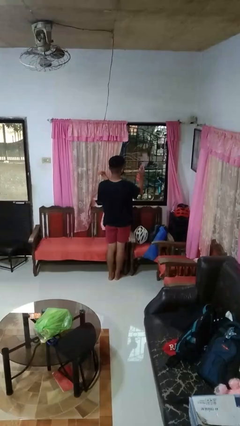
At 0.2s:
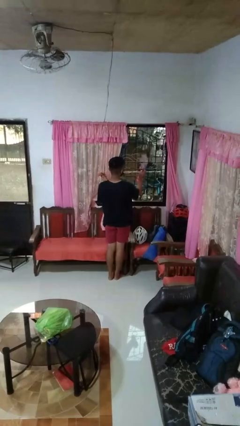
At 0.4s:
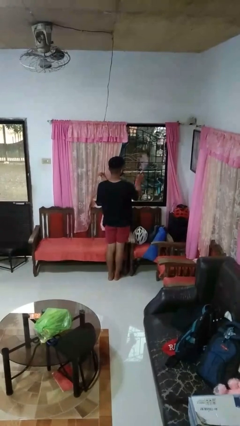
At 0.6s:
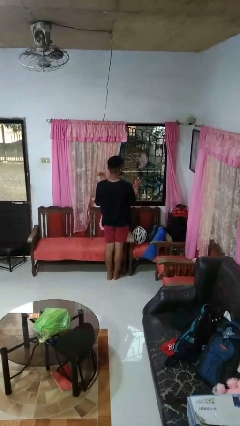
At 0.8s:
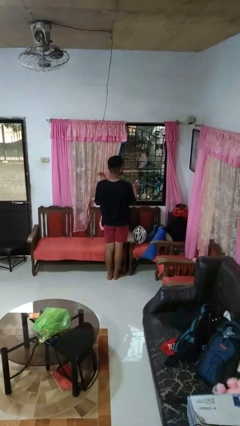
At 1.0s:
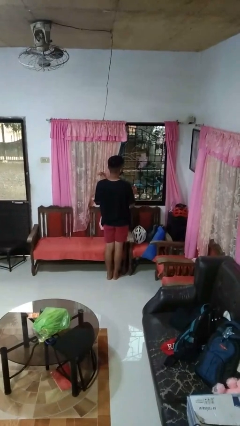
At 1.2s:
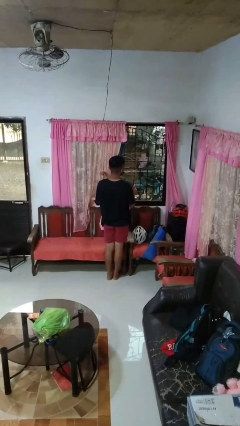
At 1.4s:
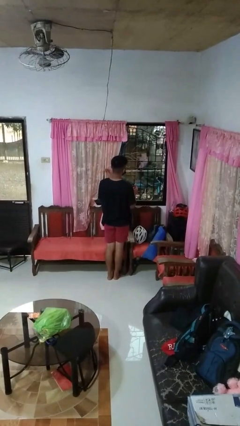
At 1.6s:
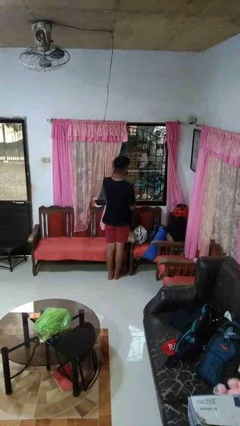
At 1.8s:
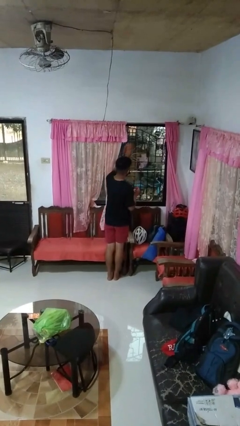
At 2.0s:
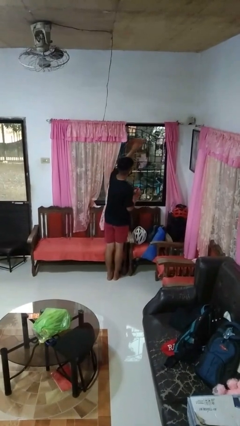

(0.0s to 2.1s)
person sprays from bottle

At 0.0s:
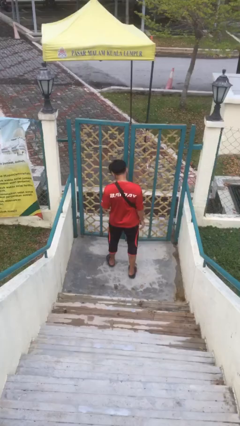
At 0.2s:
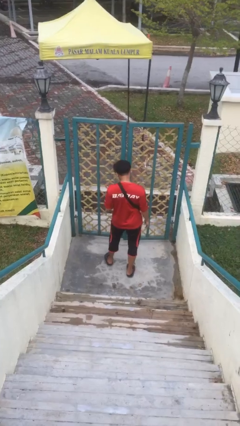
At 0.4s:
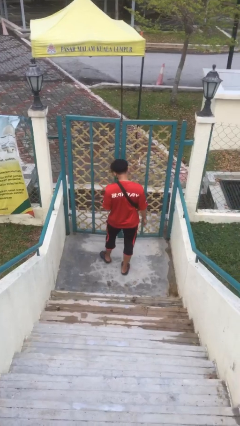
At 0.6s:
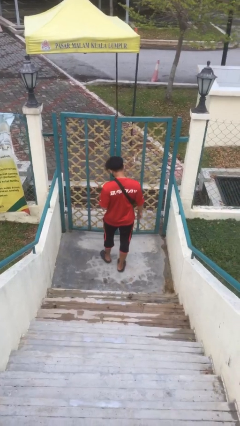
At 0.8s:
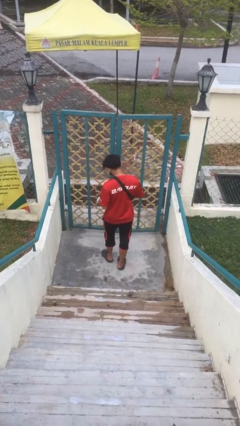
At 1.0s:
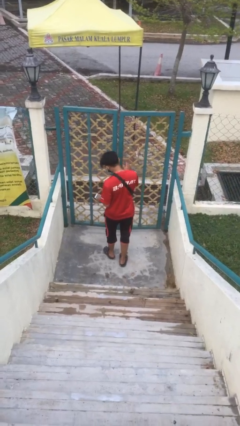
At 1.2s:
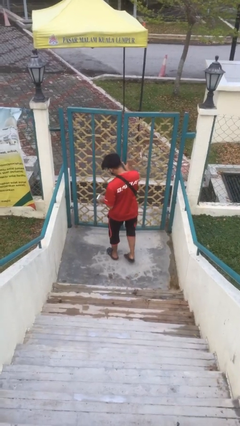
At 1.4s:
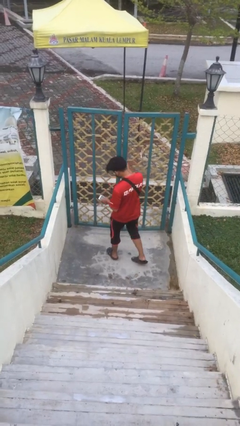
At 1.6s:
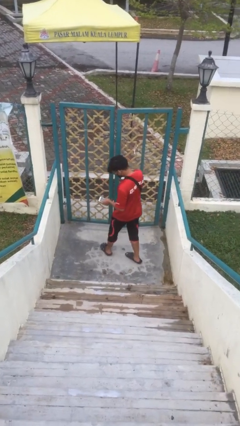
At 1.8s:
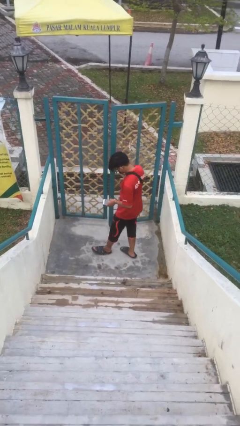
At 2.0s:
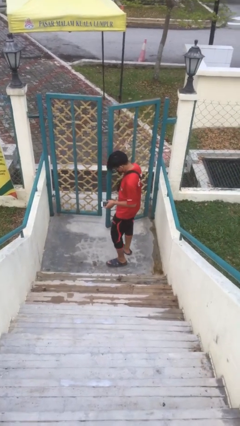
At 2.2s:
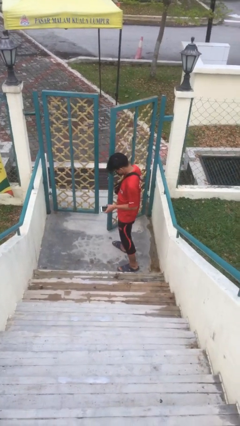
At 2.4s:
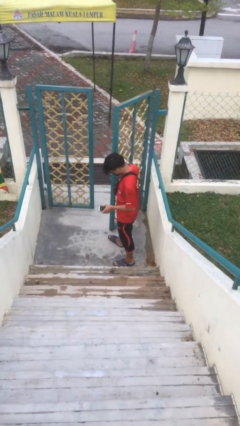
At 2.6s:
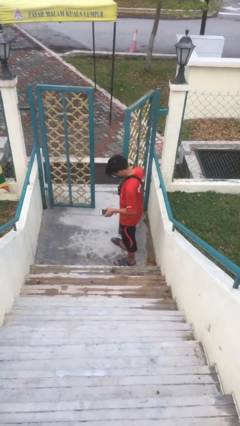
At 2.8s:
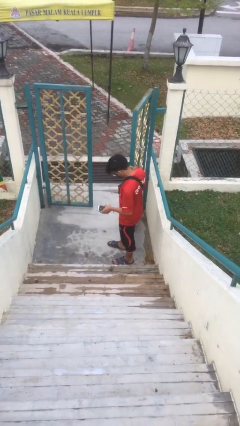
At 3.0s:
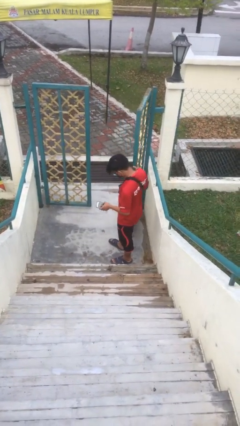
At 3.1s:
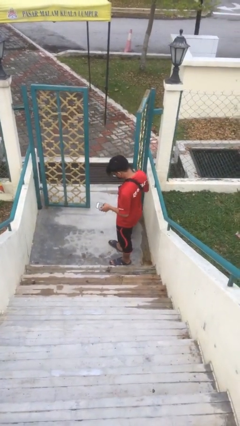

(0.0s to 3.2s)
person opens facility door

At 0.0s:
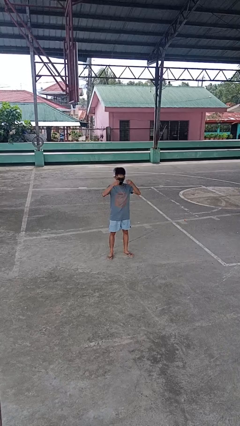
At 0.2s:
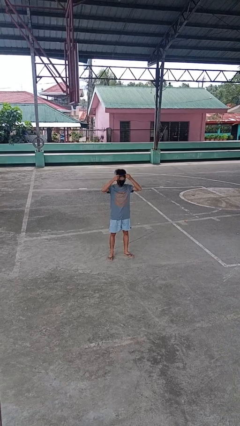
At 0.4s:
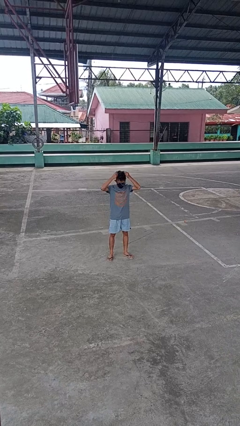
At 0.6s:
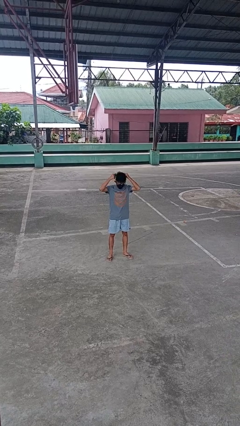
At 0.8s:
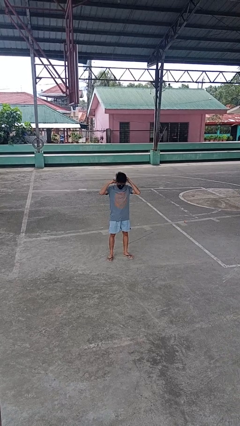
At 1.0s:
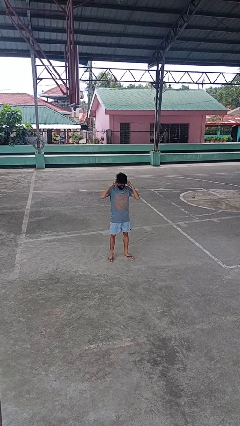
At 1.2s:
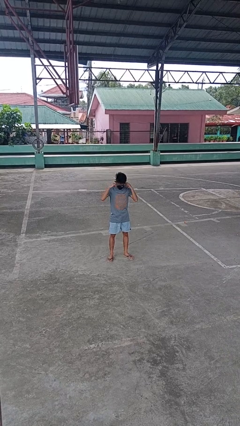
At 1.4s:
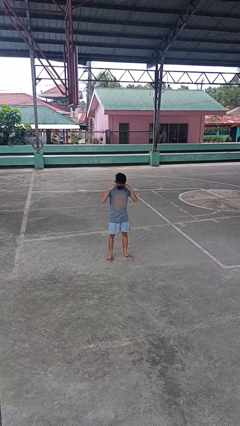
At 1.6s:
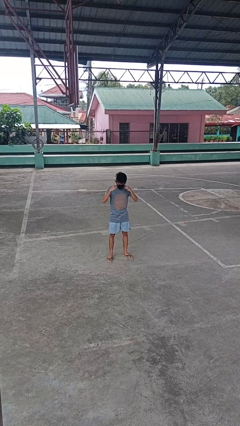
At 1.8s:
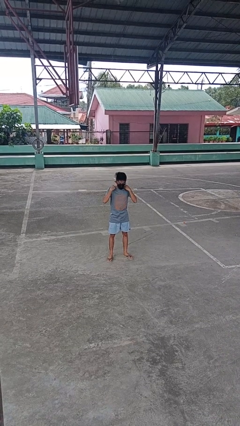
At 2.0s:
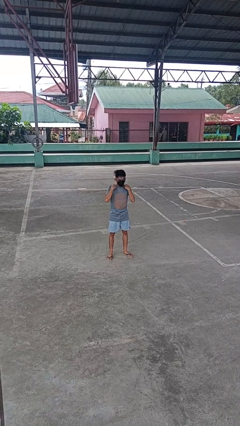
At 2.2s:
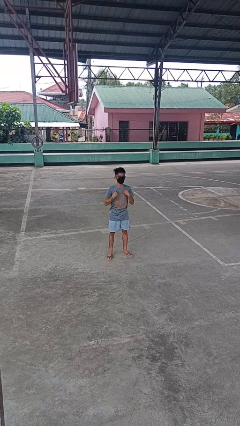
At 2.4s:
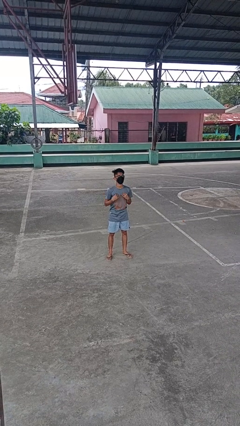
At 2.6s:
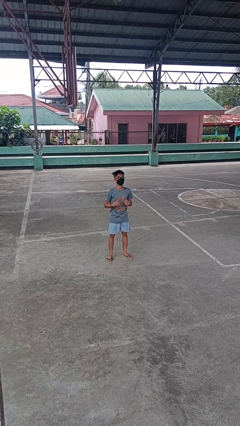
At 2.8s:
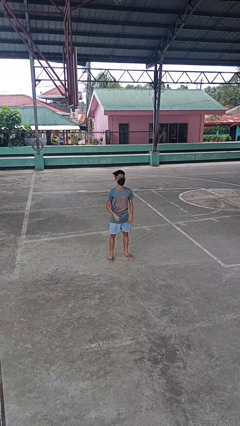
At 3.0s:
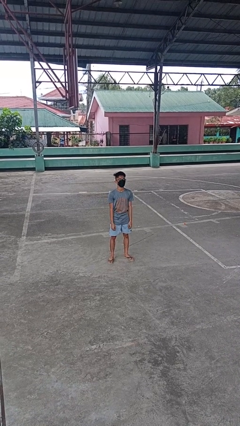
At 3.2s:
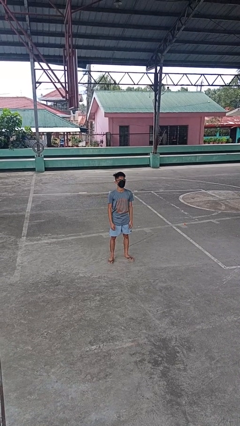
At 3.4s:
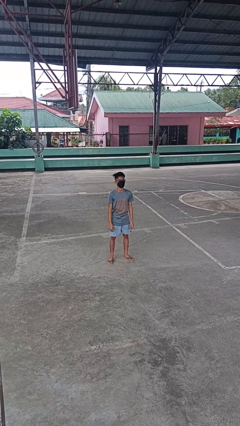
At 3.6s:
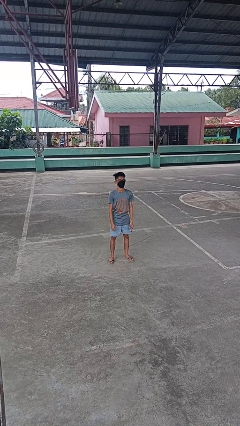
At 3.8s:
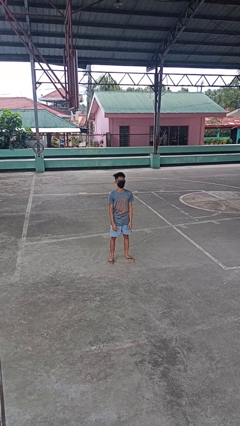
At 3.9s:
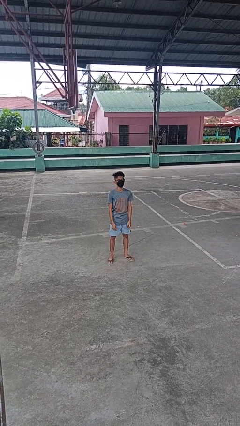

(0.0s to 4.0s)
person puts on necklace

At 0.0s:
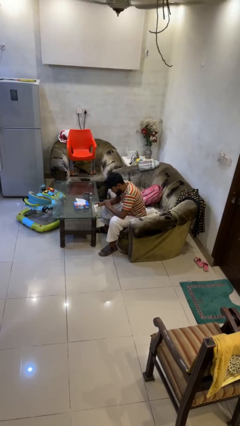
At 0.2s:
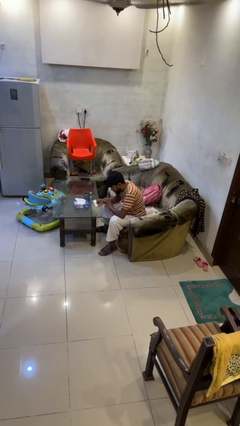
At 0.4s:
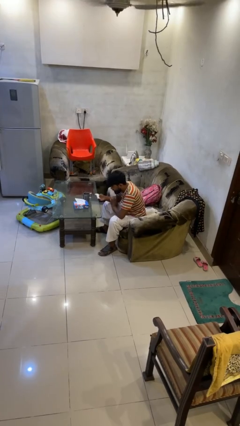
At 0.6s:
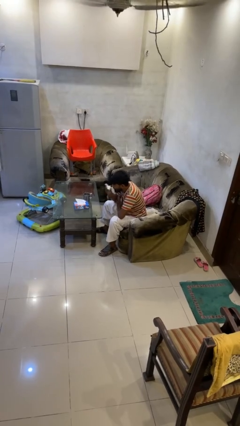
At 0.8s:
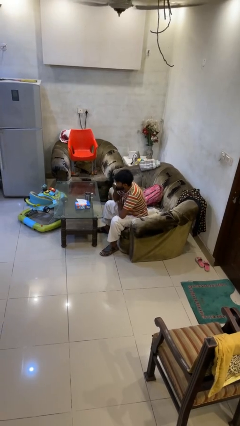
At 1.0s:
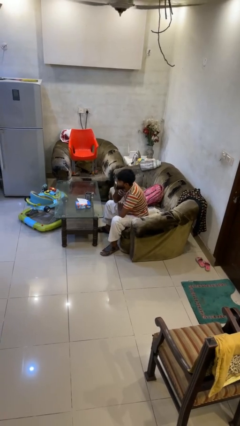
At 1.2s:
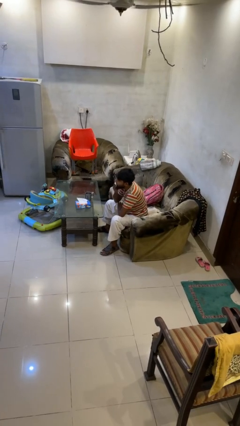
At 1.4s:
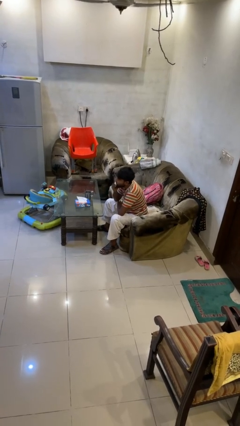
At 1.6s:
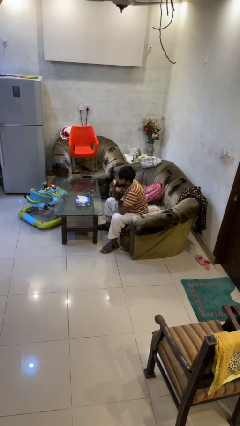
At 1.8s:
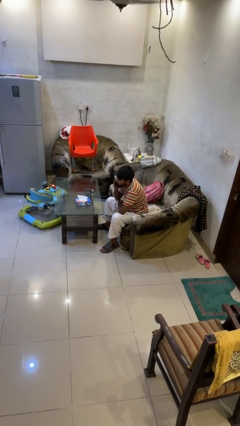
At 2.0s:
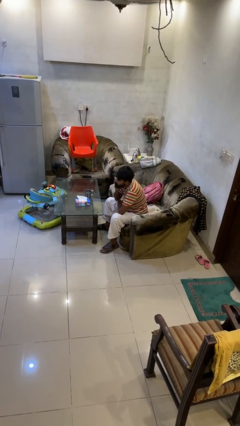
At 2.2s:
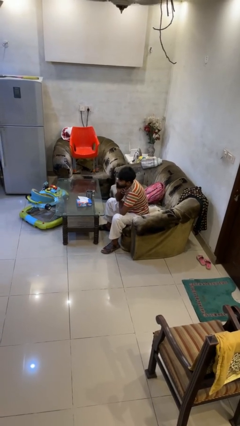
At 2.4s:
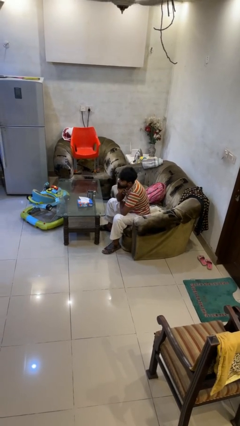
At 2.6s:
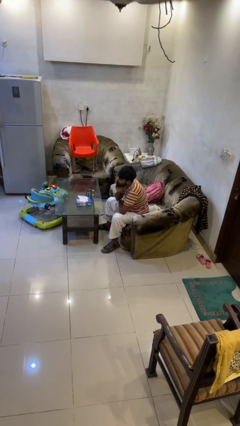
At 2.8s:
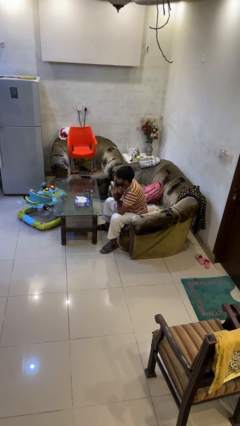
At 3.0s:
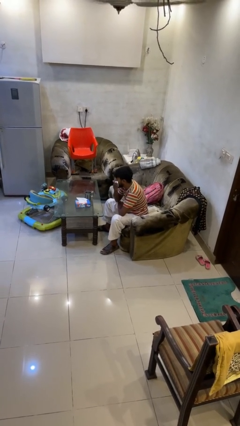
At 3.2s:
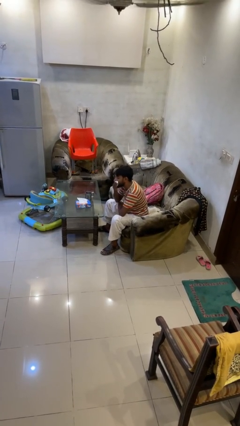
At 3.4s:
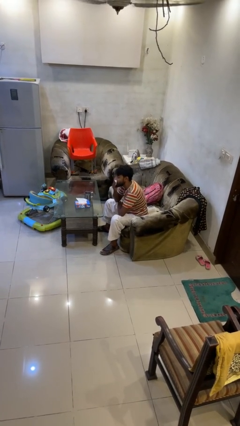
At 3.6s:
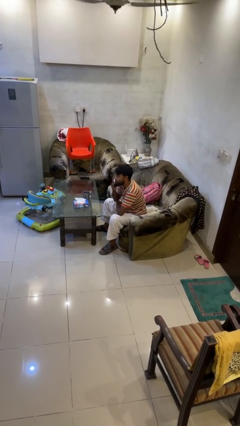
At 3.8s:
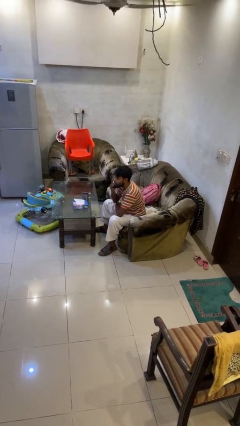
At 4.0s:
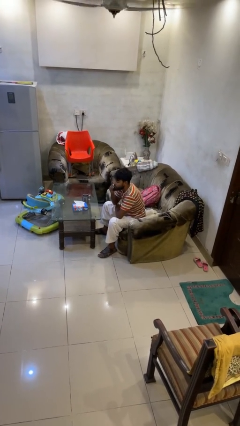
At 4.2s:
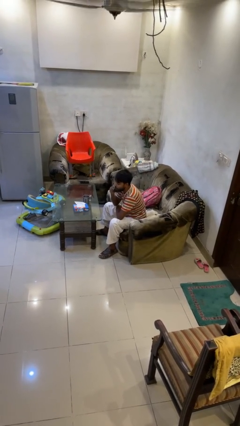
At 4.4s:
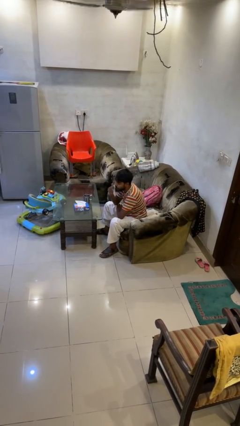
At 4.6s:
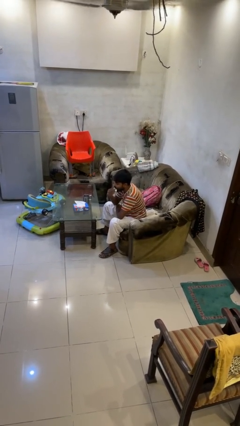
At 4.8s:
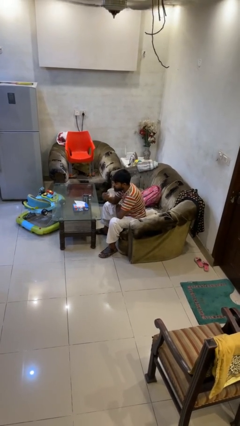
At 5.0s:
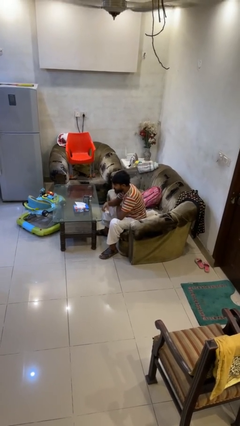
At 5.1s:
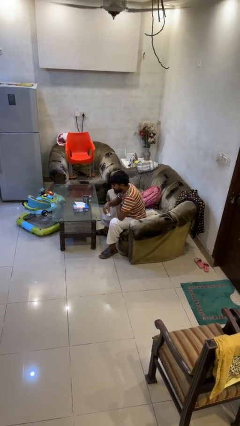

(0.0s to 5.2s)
person wipes mouth with napkin

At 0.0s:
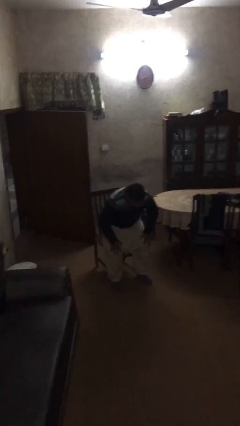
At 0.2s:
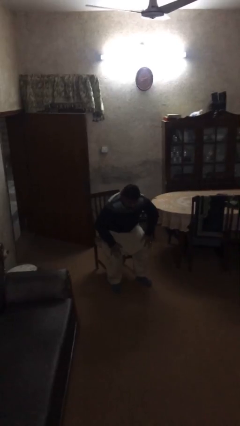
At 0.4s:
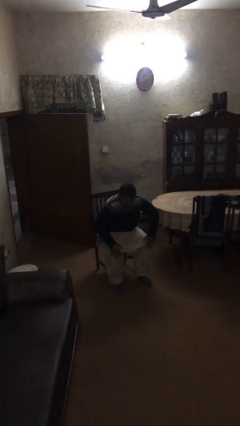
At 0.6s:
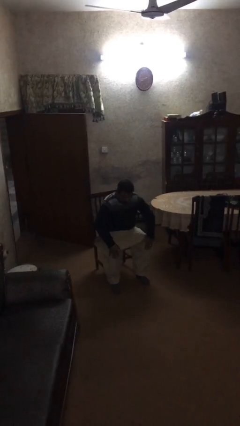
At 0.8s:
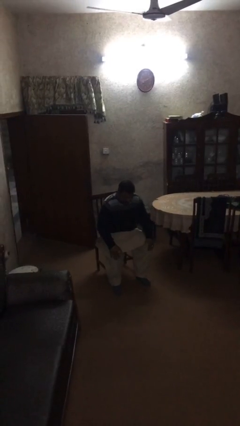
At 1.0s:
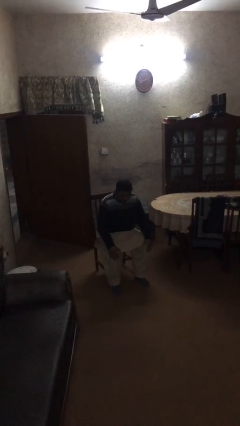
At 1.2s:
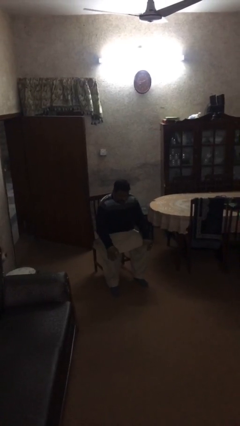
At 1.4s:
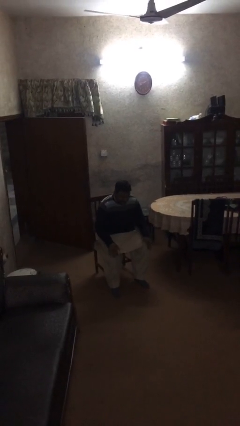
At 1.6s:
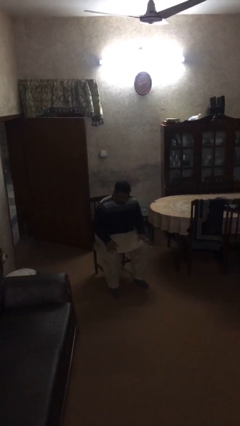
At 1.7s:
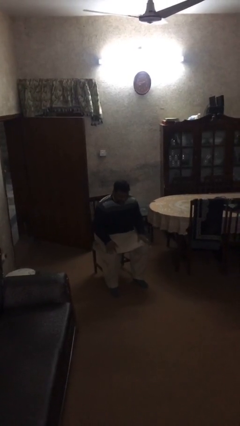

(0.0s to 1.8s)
person stands up

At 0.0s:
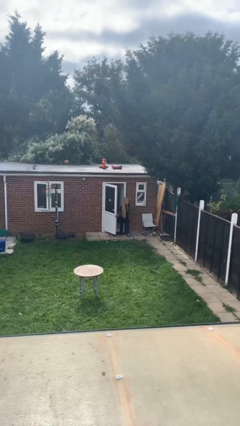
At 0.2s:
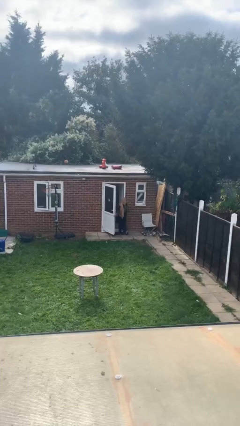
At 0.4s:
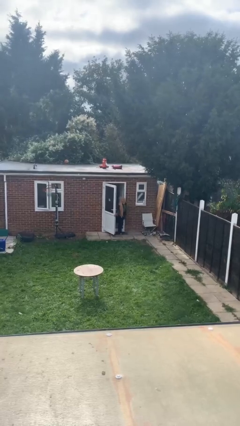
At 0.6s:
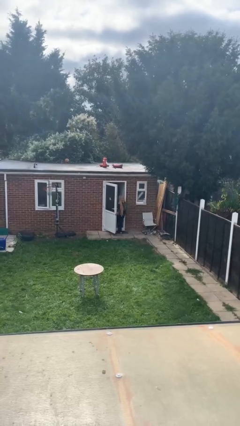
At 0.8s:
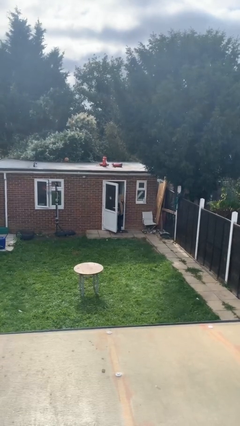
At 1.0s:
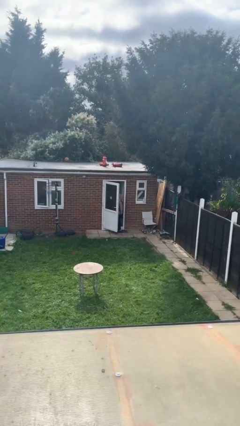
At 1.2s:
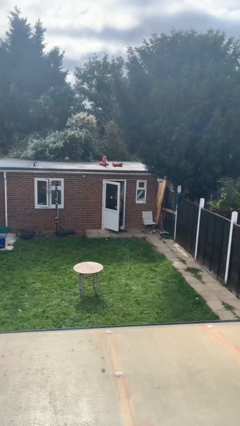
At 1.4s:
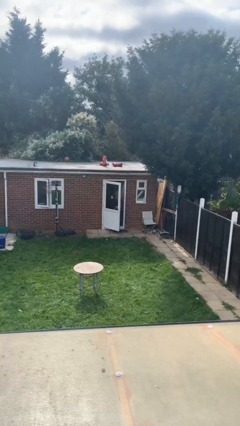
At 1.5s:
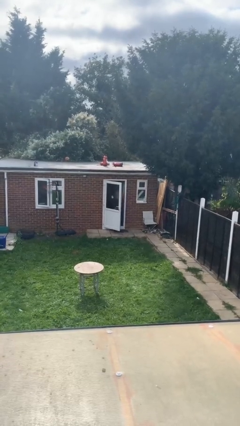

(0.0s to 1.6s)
person exits scene through structure
